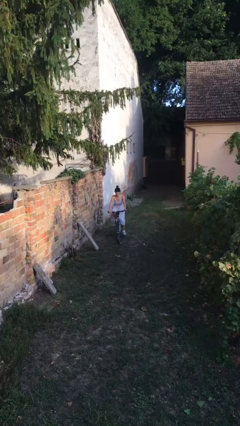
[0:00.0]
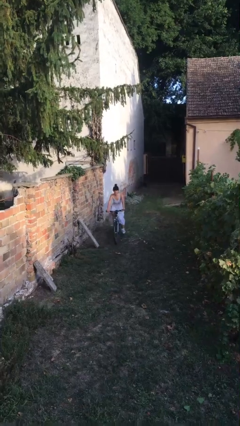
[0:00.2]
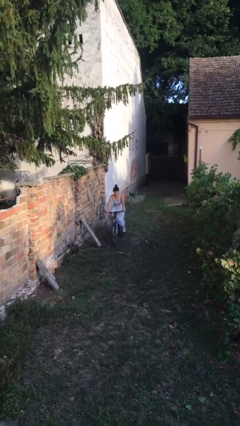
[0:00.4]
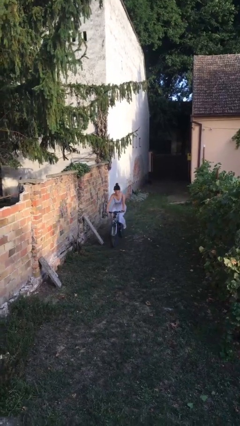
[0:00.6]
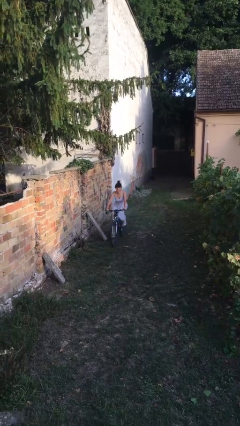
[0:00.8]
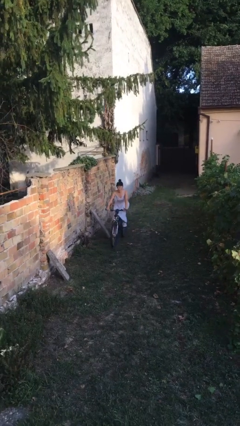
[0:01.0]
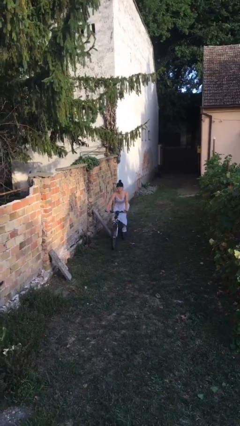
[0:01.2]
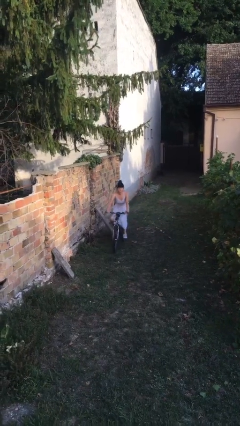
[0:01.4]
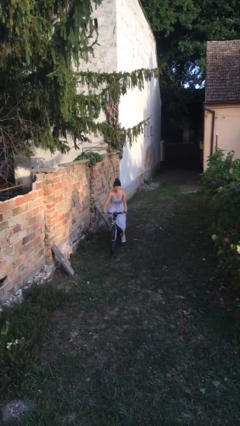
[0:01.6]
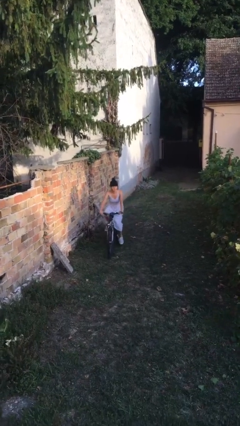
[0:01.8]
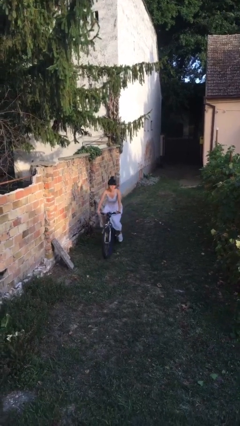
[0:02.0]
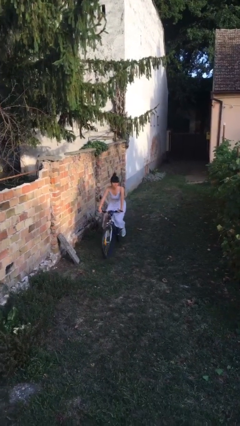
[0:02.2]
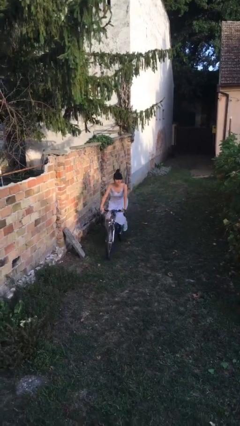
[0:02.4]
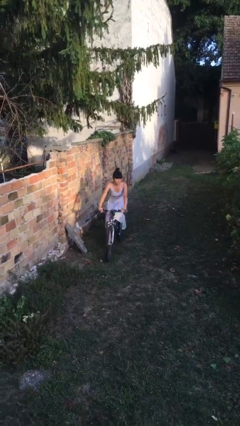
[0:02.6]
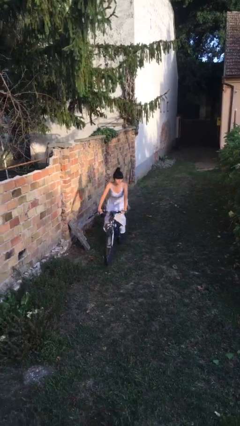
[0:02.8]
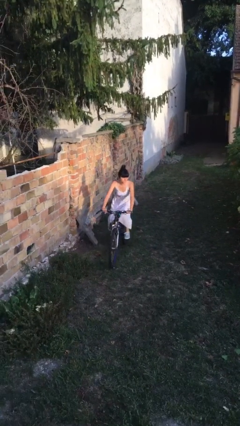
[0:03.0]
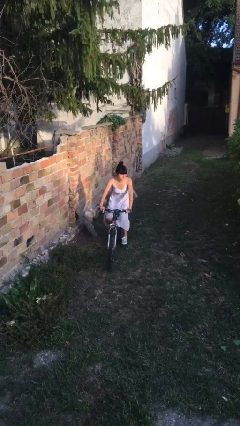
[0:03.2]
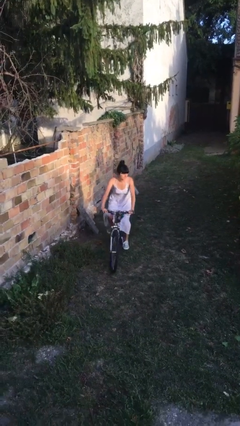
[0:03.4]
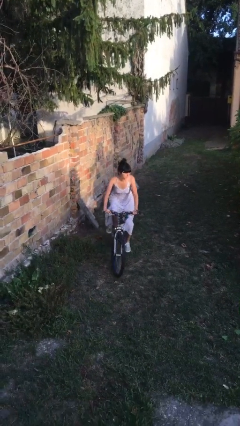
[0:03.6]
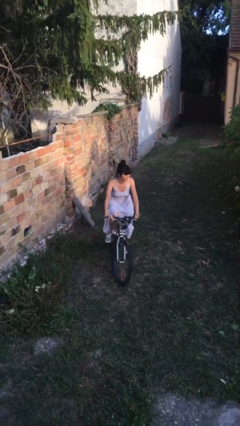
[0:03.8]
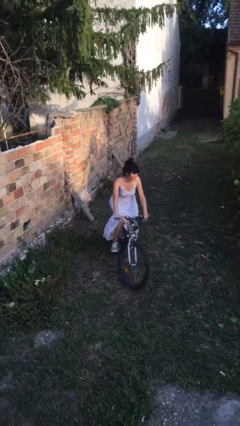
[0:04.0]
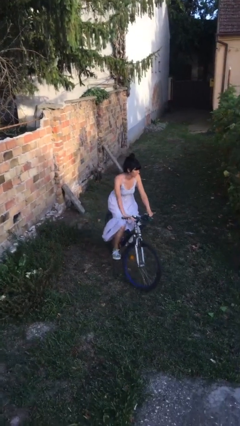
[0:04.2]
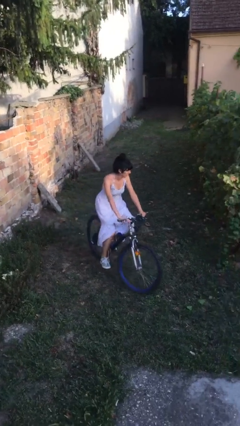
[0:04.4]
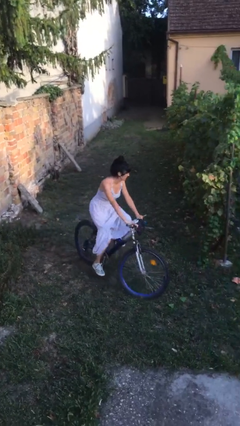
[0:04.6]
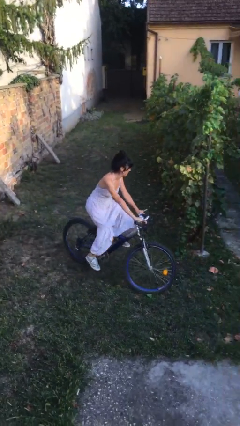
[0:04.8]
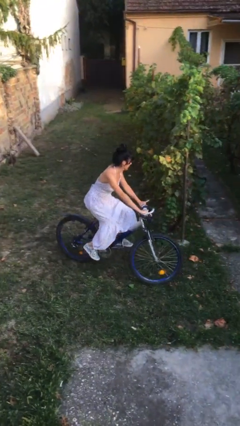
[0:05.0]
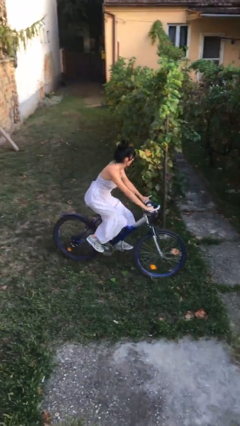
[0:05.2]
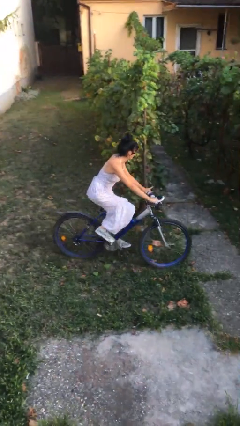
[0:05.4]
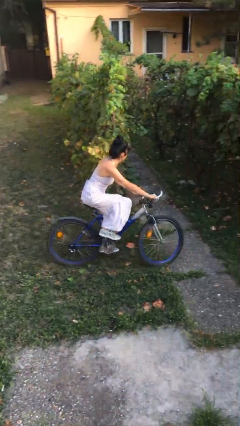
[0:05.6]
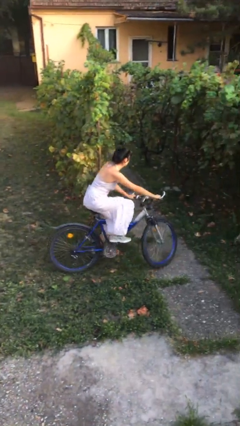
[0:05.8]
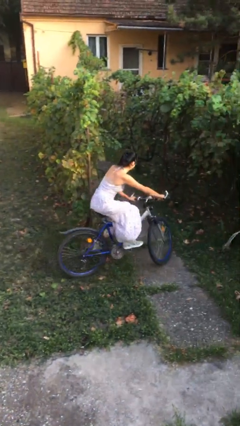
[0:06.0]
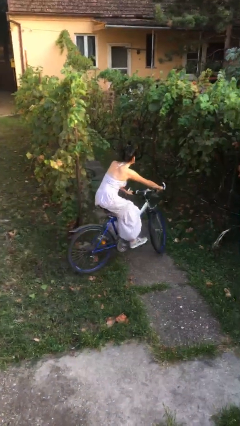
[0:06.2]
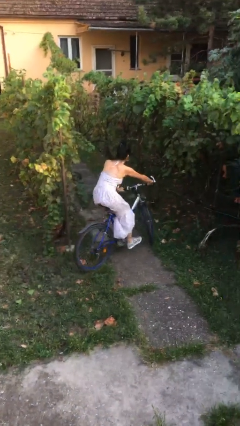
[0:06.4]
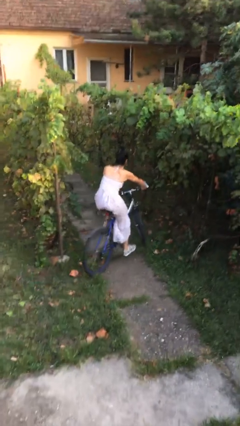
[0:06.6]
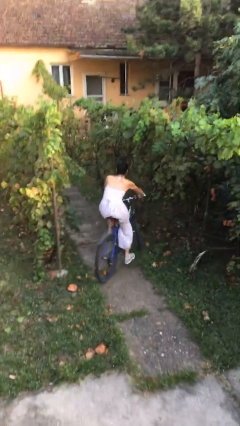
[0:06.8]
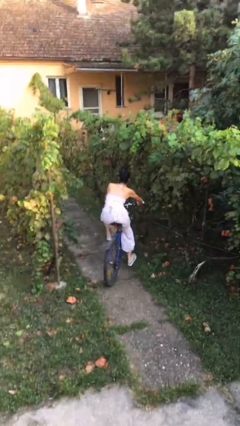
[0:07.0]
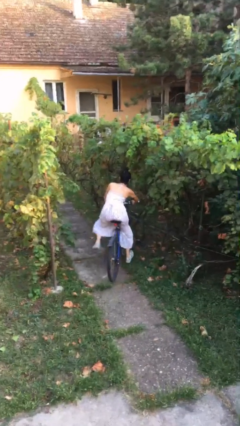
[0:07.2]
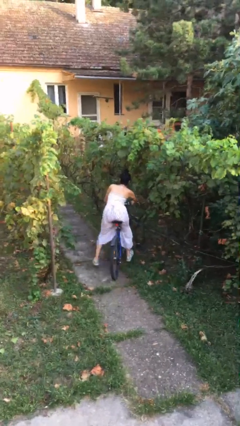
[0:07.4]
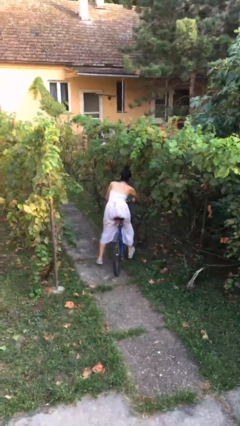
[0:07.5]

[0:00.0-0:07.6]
person rides bicycle

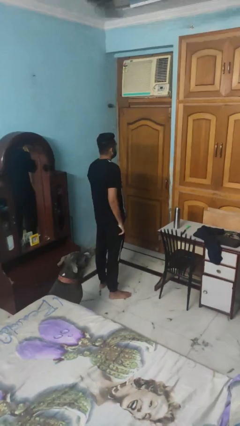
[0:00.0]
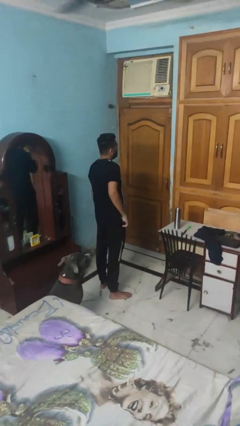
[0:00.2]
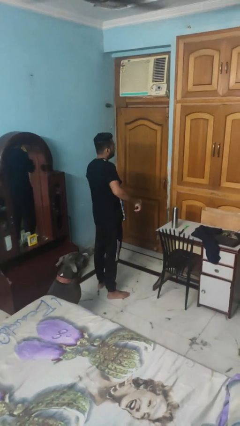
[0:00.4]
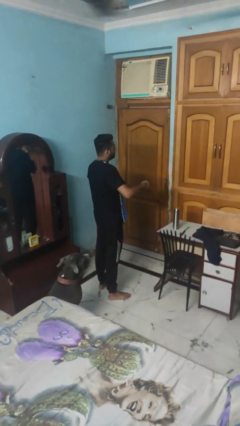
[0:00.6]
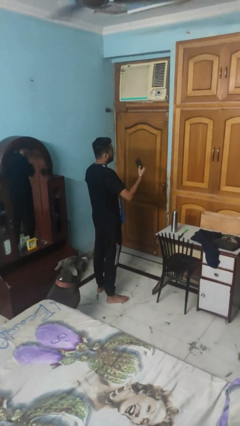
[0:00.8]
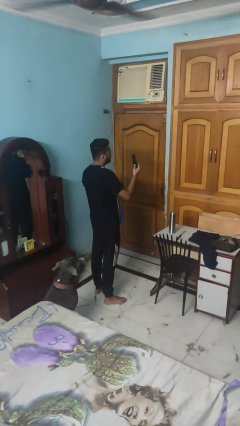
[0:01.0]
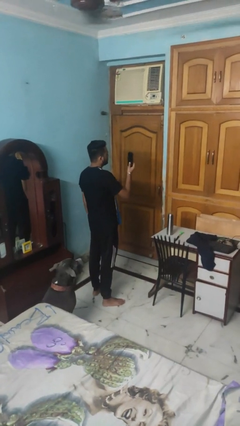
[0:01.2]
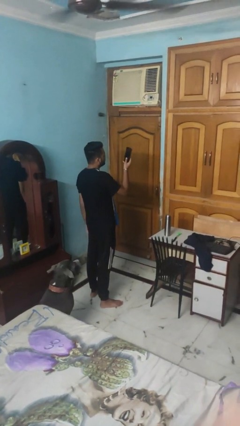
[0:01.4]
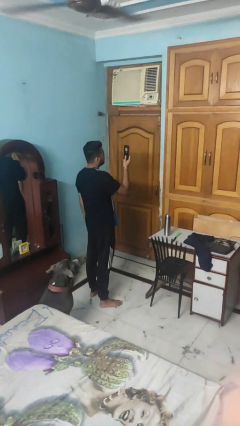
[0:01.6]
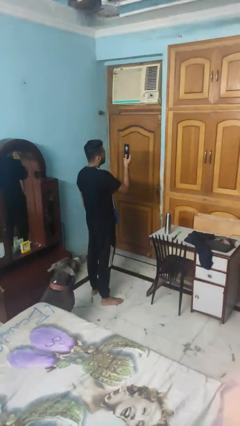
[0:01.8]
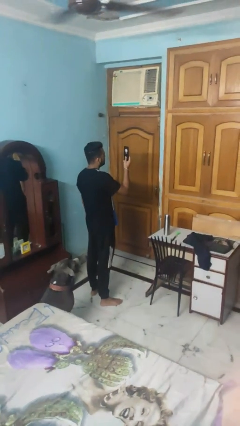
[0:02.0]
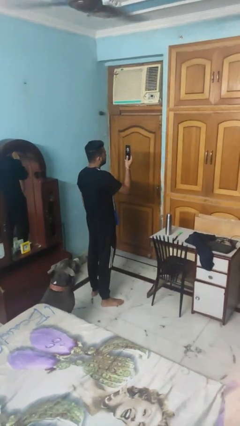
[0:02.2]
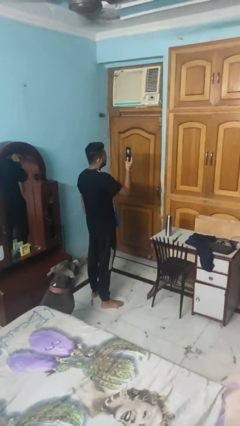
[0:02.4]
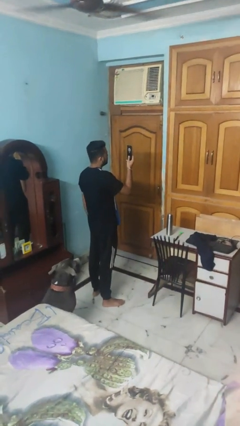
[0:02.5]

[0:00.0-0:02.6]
person takes phone from pocket

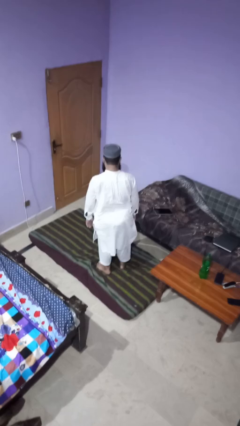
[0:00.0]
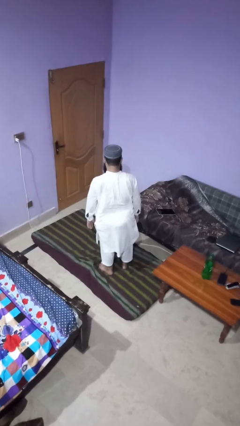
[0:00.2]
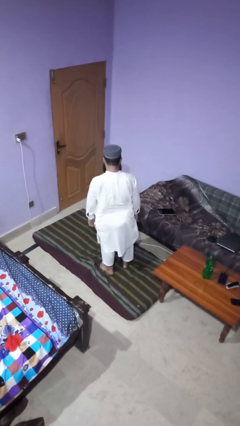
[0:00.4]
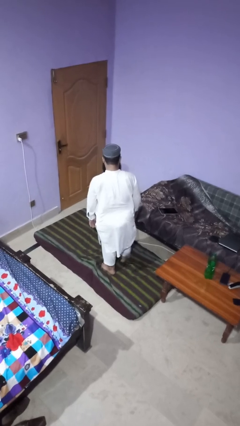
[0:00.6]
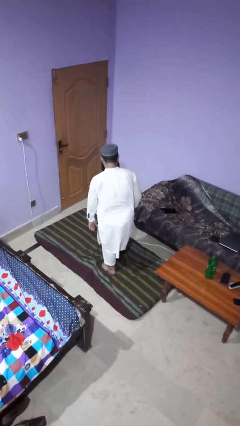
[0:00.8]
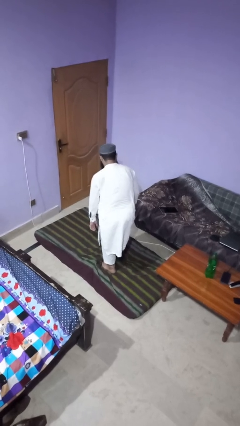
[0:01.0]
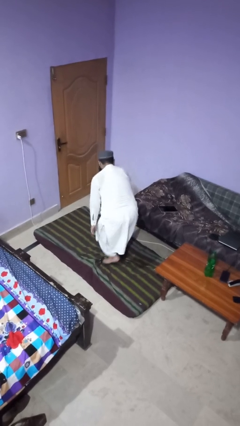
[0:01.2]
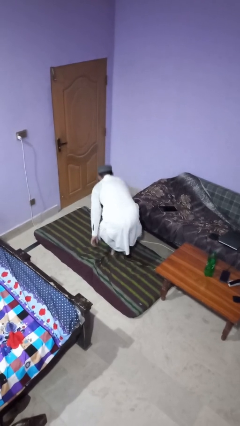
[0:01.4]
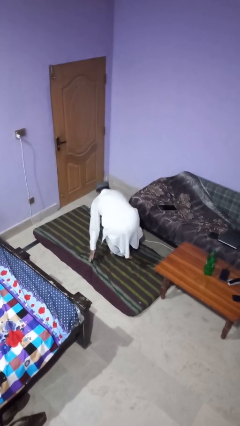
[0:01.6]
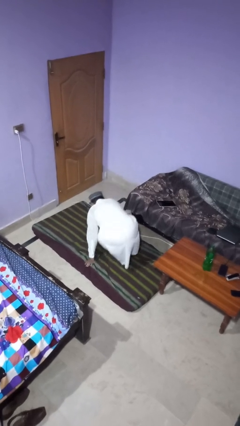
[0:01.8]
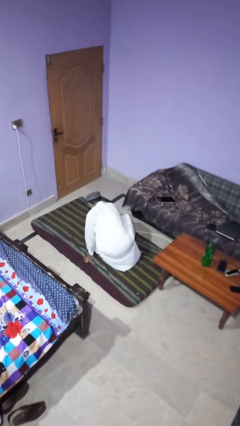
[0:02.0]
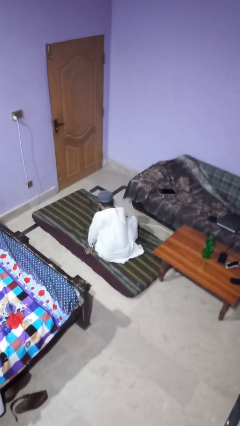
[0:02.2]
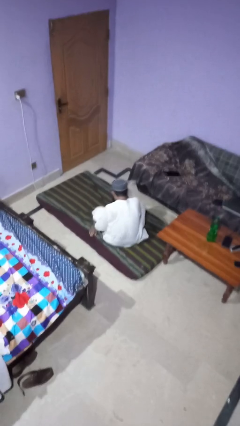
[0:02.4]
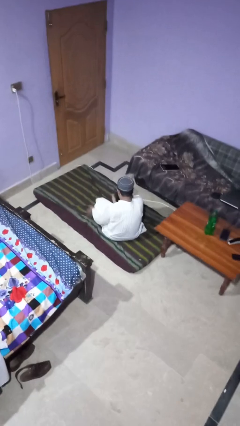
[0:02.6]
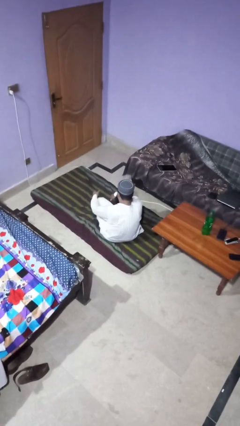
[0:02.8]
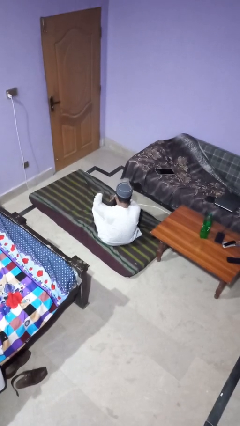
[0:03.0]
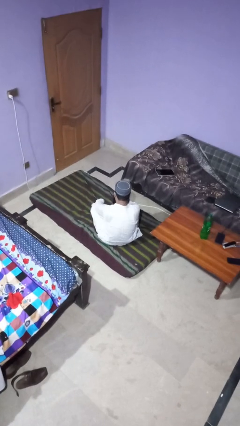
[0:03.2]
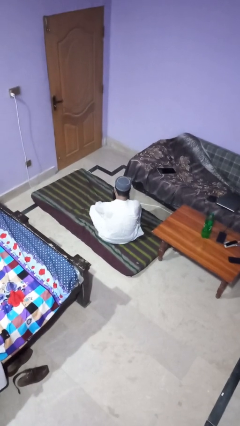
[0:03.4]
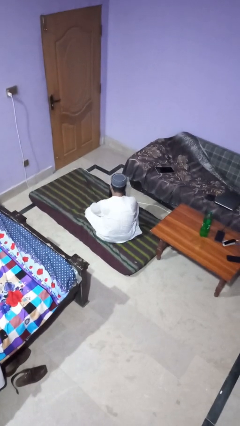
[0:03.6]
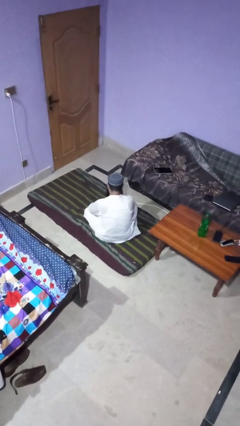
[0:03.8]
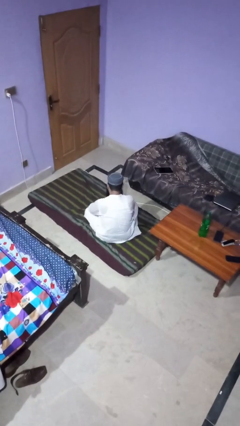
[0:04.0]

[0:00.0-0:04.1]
person sits crisscross

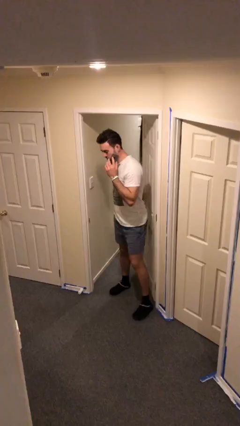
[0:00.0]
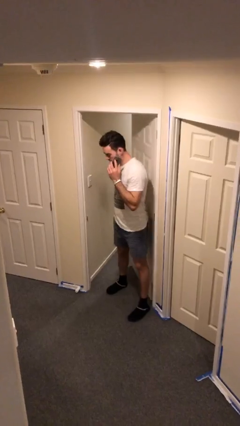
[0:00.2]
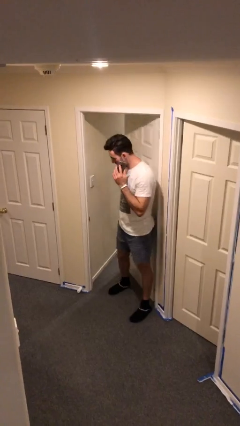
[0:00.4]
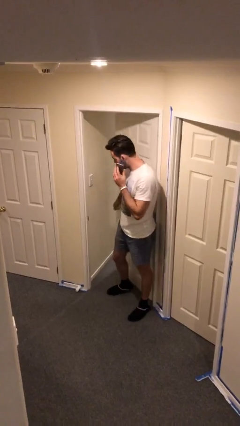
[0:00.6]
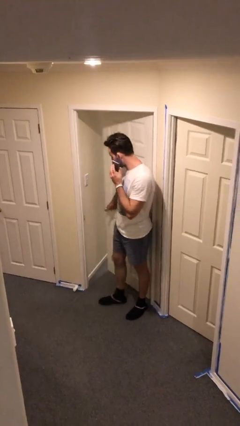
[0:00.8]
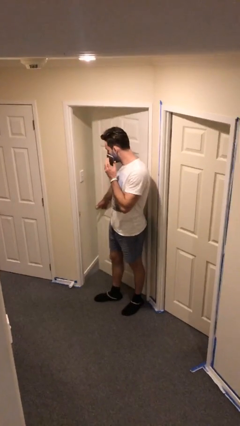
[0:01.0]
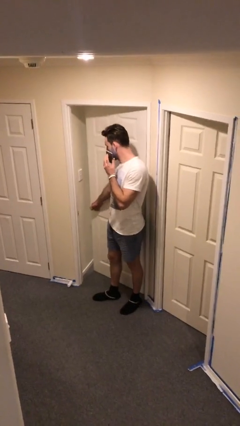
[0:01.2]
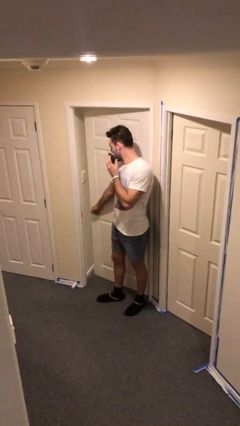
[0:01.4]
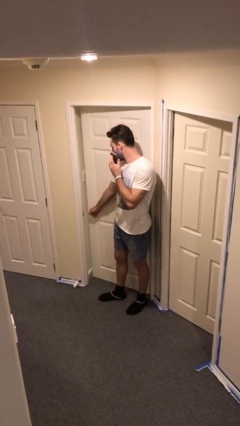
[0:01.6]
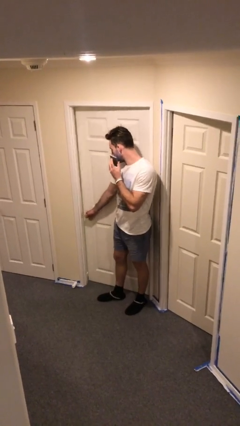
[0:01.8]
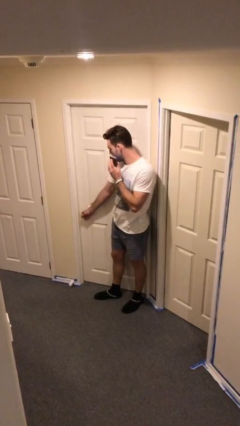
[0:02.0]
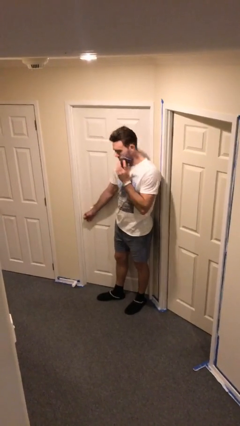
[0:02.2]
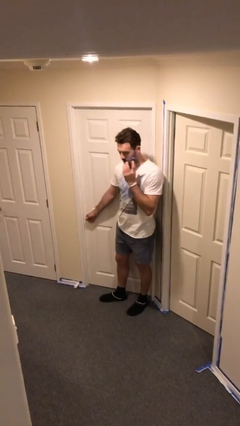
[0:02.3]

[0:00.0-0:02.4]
person closes facility door

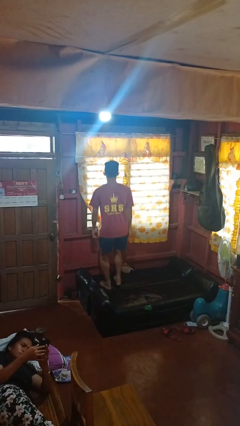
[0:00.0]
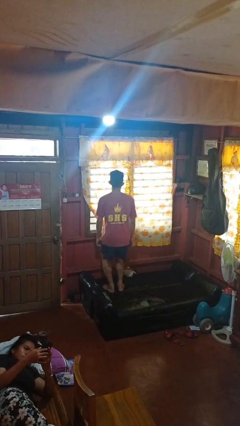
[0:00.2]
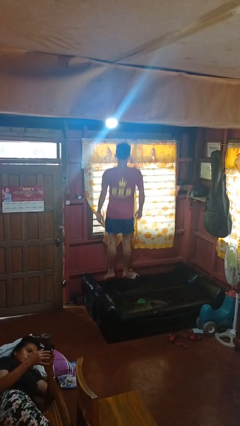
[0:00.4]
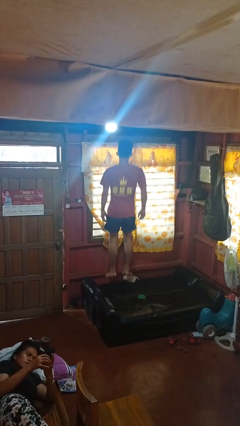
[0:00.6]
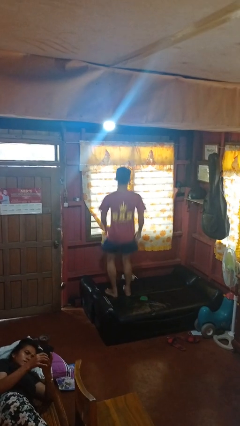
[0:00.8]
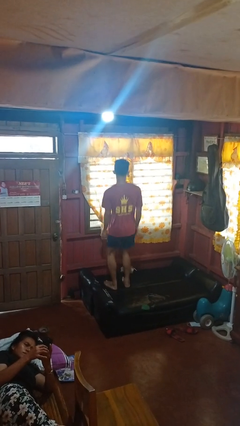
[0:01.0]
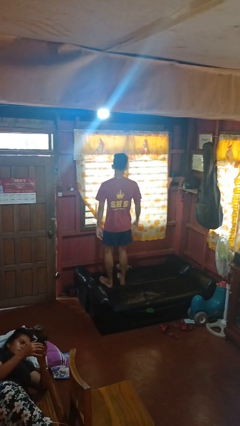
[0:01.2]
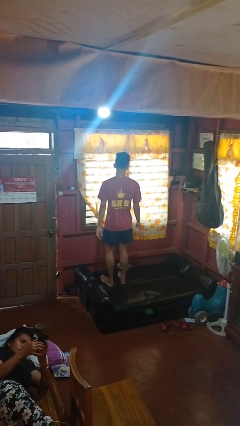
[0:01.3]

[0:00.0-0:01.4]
person jumps on couch
